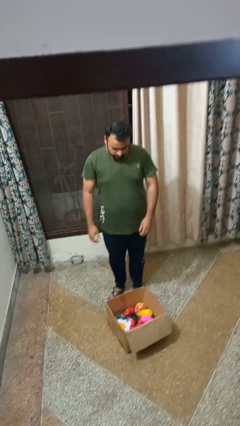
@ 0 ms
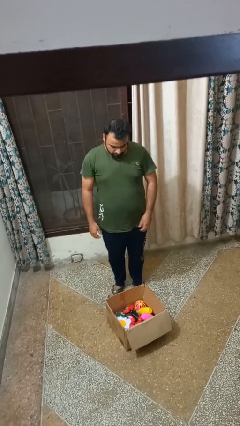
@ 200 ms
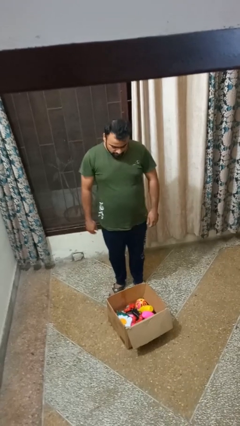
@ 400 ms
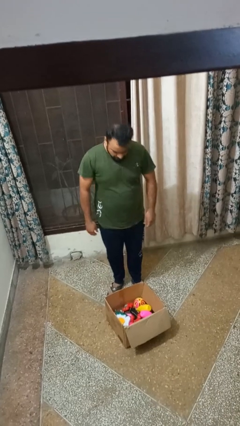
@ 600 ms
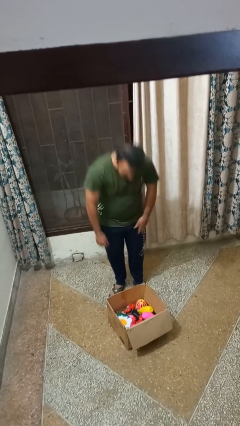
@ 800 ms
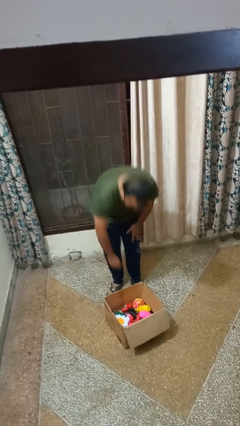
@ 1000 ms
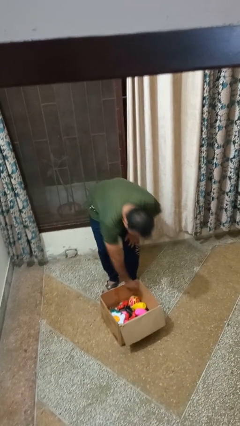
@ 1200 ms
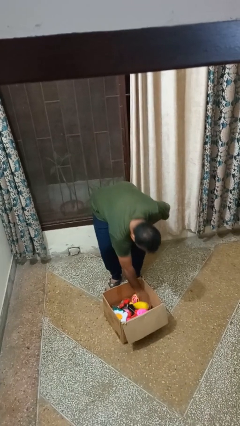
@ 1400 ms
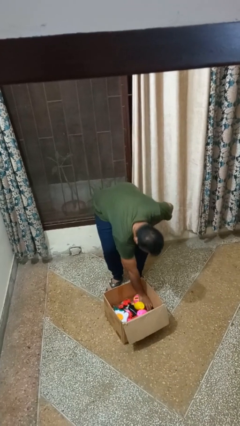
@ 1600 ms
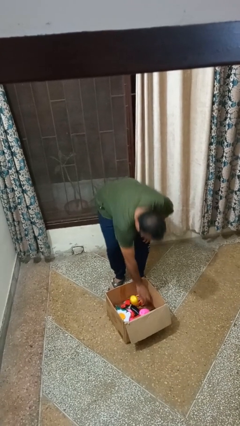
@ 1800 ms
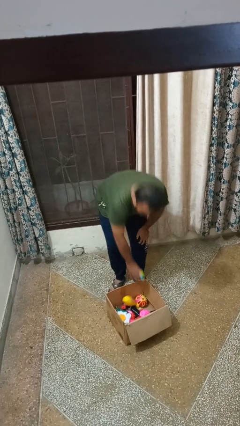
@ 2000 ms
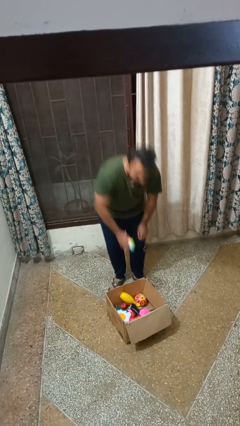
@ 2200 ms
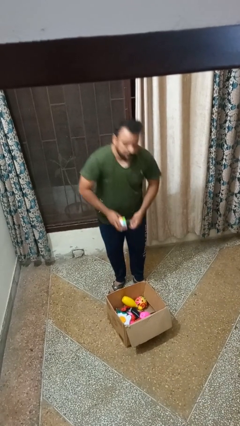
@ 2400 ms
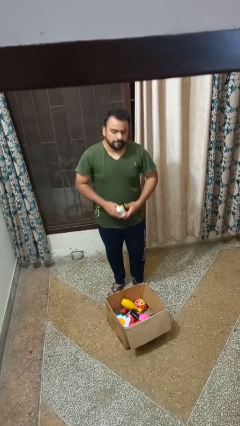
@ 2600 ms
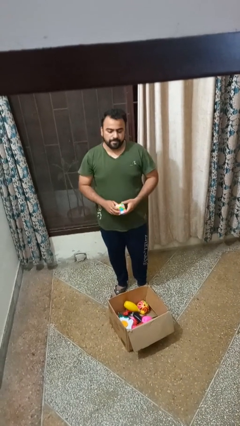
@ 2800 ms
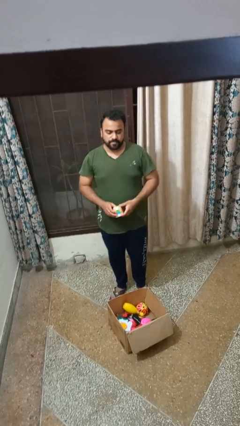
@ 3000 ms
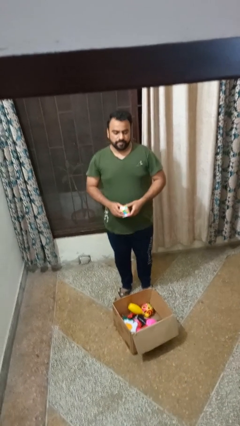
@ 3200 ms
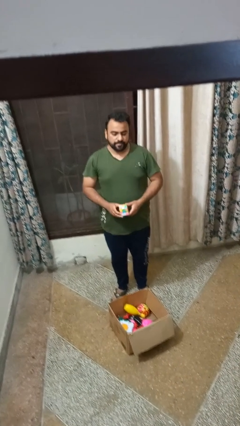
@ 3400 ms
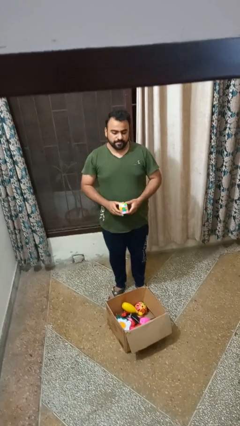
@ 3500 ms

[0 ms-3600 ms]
person takes object from box

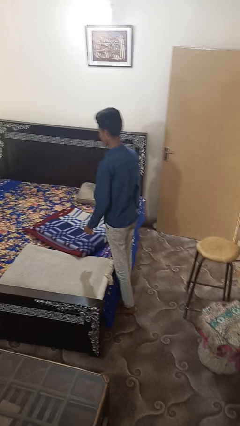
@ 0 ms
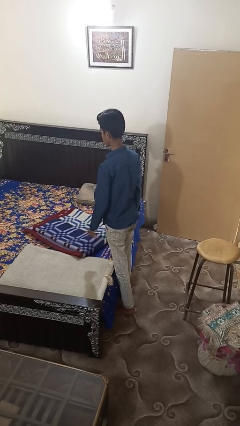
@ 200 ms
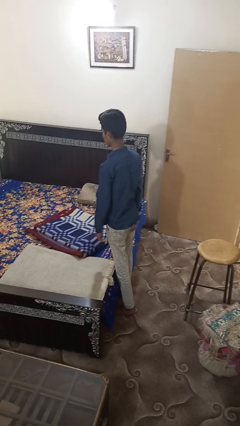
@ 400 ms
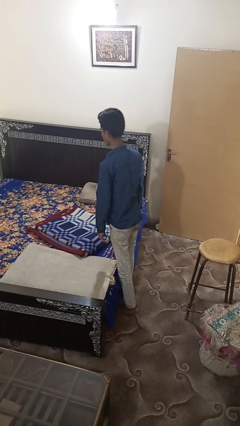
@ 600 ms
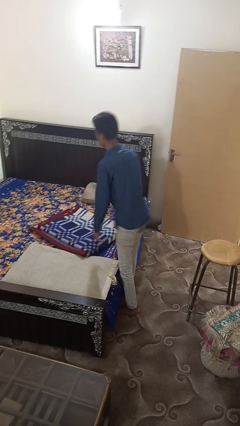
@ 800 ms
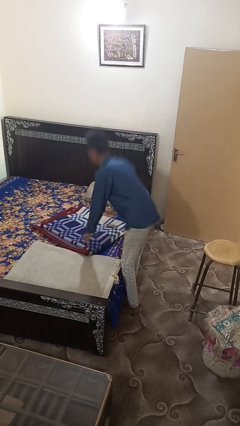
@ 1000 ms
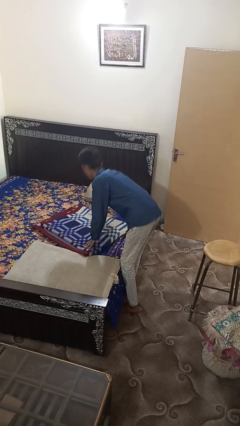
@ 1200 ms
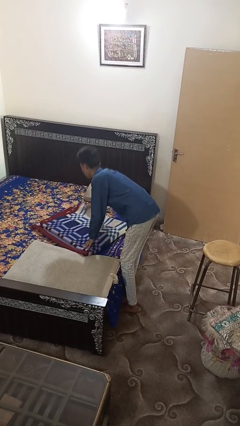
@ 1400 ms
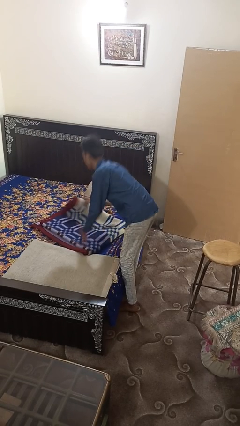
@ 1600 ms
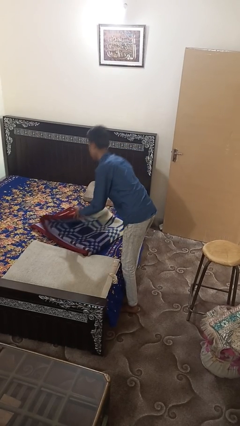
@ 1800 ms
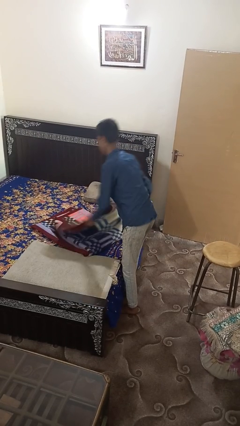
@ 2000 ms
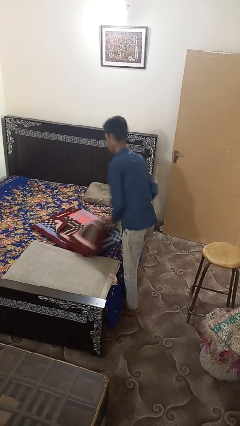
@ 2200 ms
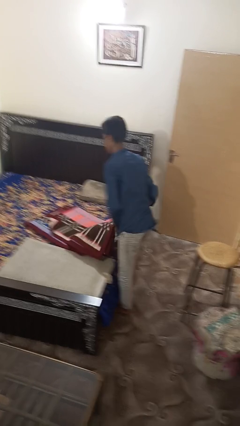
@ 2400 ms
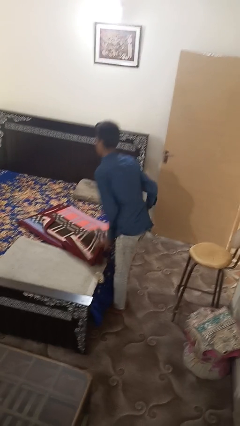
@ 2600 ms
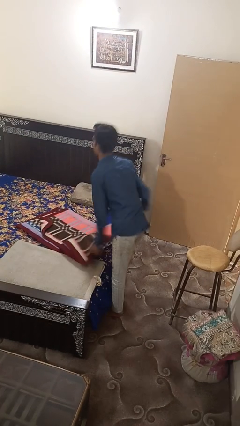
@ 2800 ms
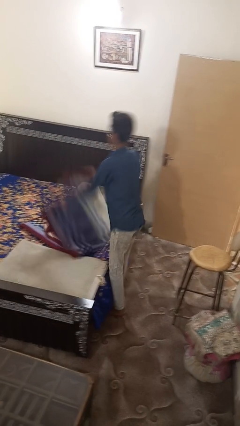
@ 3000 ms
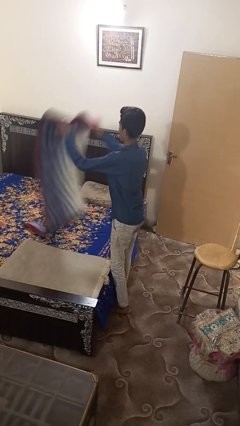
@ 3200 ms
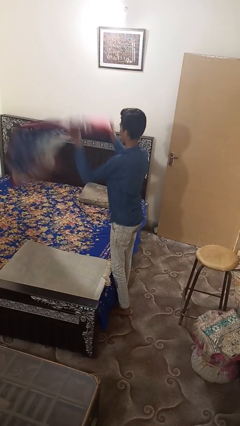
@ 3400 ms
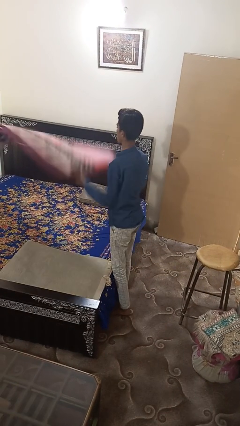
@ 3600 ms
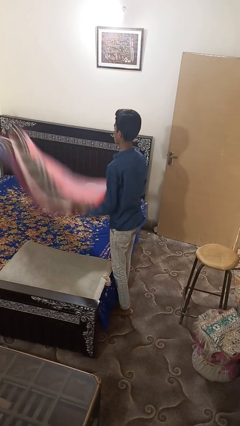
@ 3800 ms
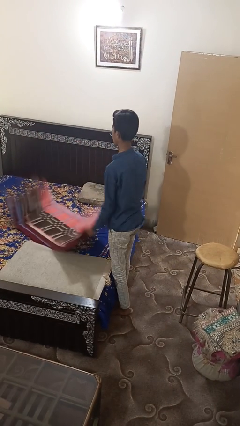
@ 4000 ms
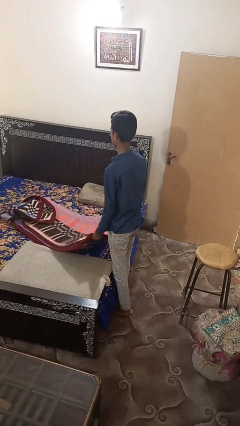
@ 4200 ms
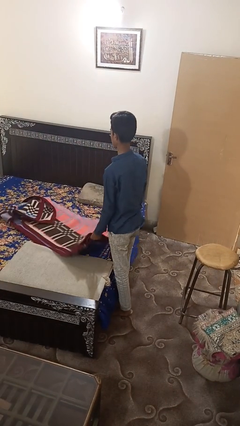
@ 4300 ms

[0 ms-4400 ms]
person unfolds blanket

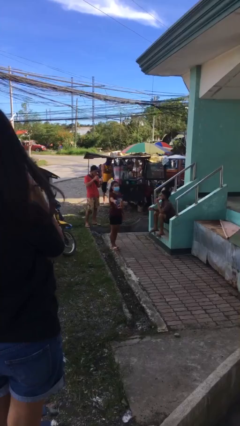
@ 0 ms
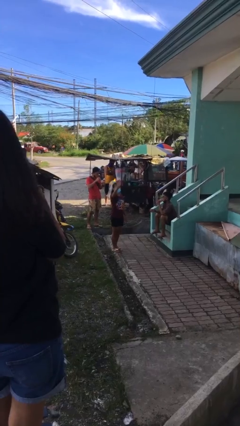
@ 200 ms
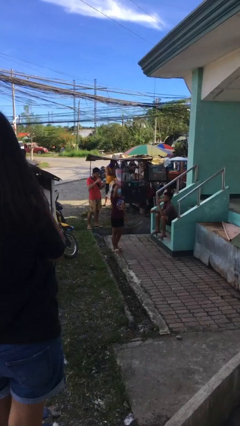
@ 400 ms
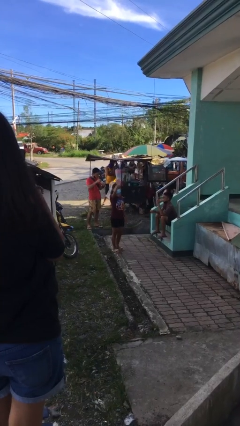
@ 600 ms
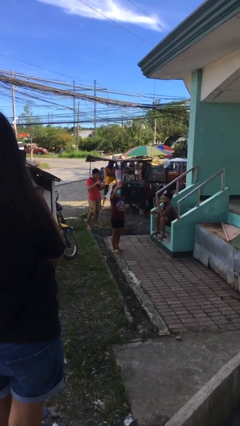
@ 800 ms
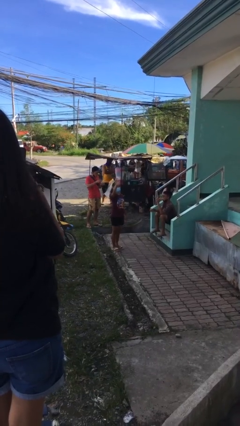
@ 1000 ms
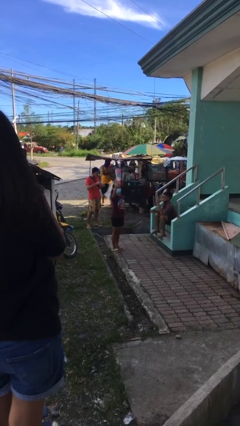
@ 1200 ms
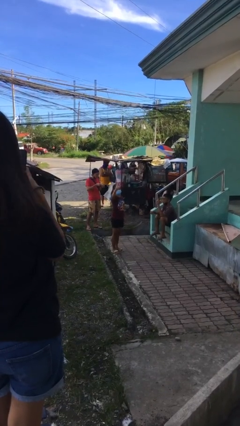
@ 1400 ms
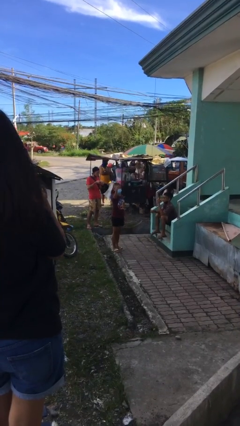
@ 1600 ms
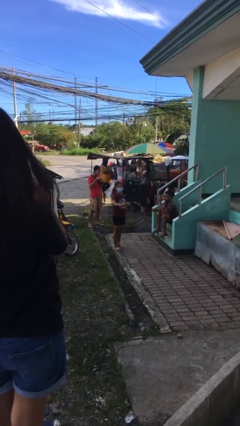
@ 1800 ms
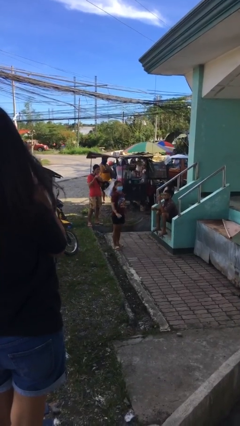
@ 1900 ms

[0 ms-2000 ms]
person waves at person

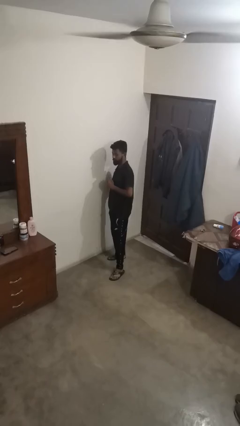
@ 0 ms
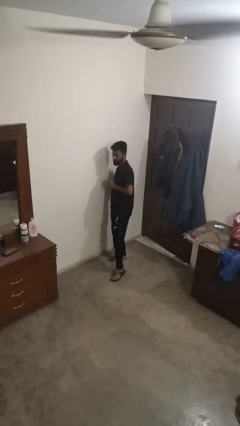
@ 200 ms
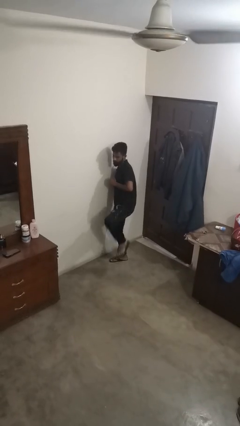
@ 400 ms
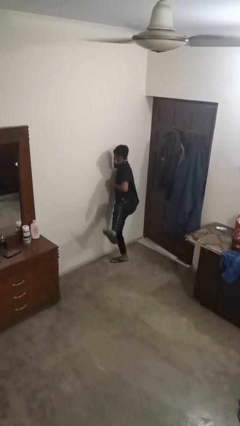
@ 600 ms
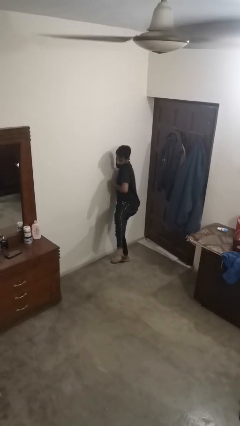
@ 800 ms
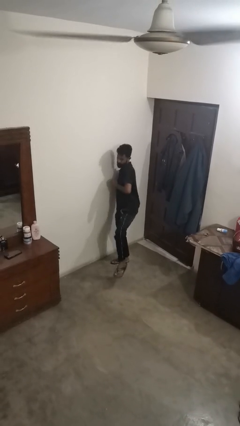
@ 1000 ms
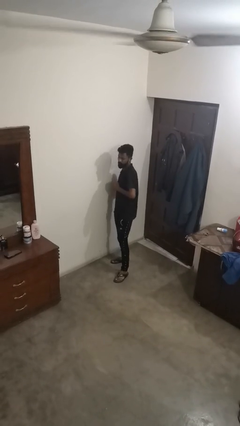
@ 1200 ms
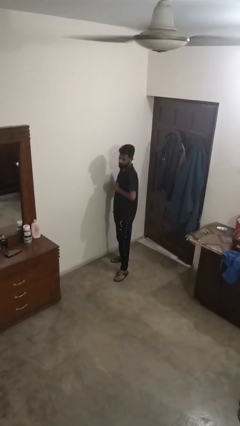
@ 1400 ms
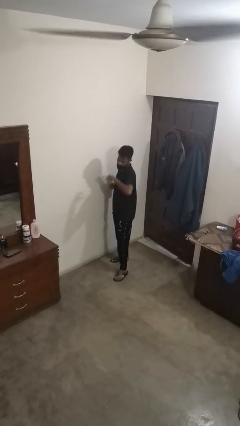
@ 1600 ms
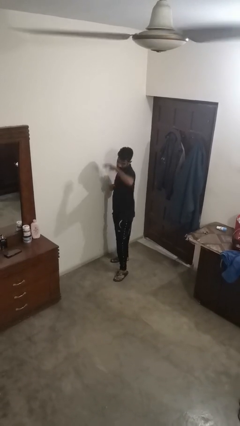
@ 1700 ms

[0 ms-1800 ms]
person karate kicks

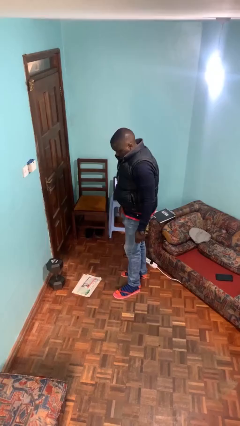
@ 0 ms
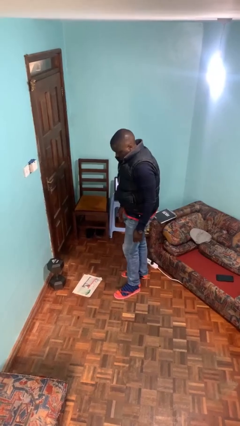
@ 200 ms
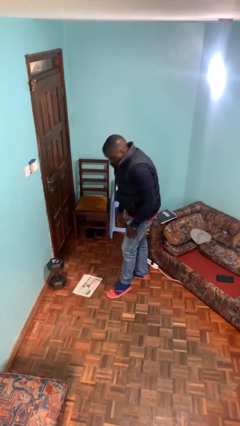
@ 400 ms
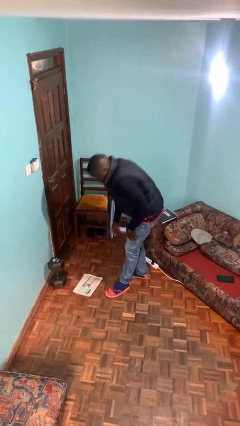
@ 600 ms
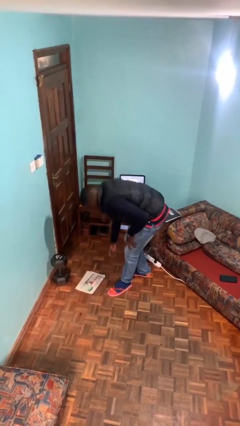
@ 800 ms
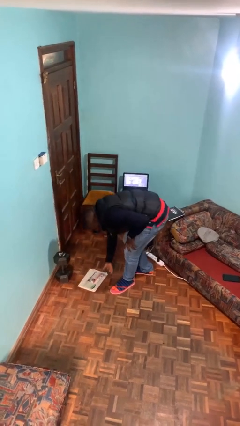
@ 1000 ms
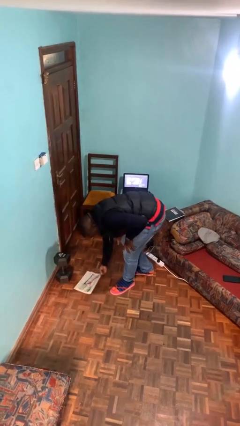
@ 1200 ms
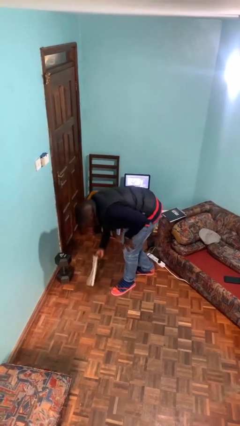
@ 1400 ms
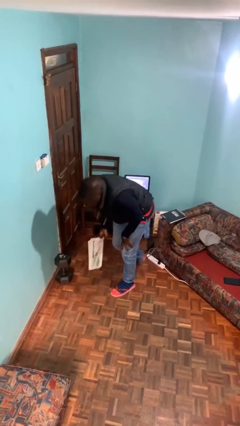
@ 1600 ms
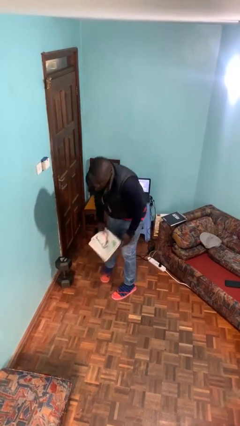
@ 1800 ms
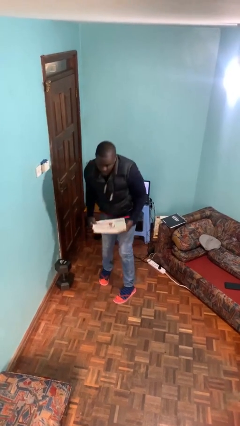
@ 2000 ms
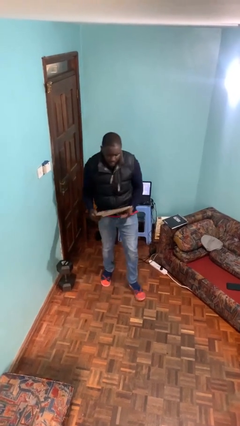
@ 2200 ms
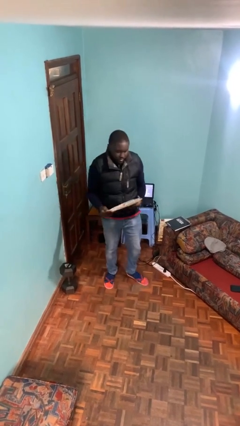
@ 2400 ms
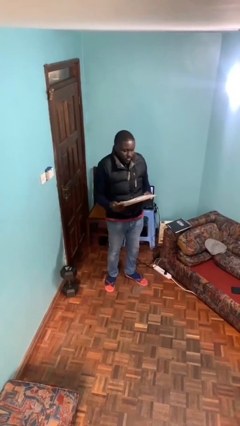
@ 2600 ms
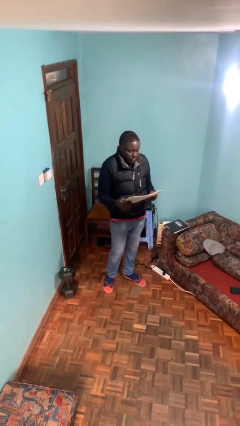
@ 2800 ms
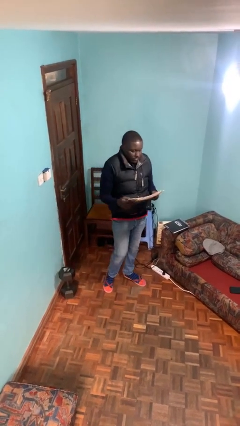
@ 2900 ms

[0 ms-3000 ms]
person picks up object from floor

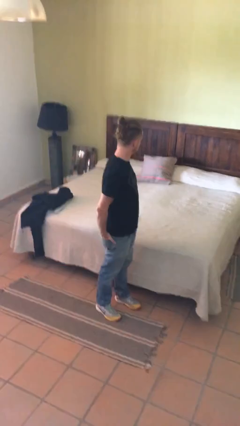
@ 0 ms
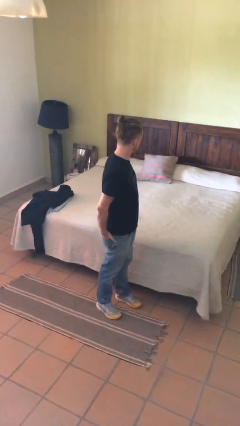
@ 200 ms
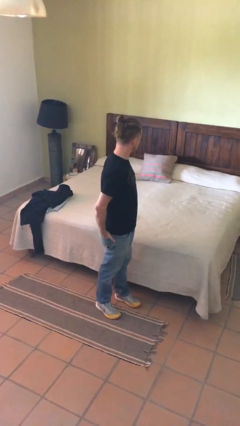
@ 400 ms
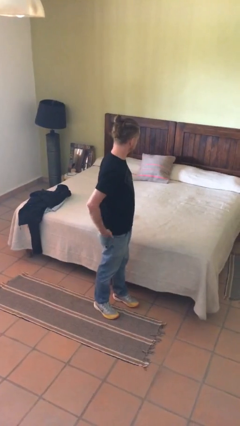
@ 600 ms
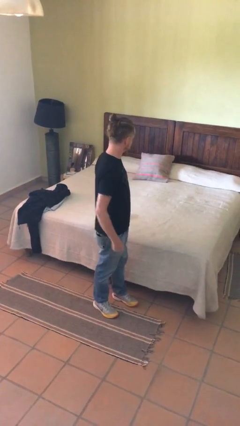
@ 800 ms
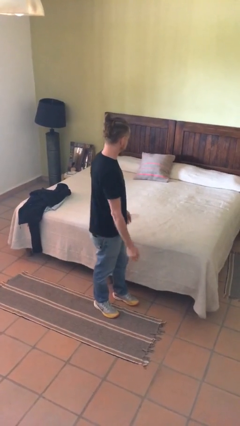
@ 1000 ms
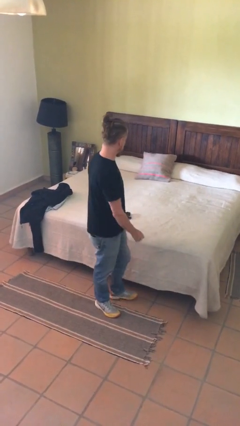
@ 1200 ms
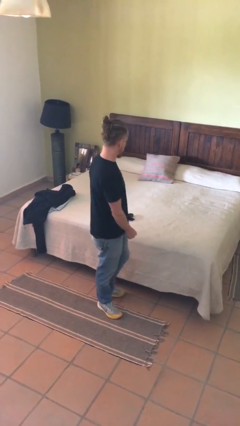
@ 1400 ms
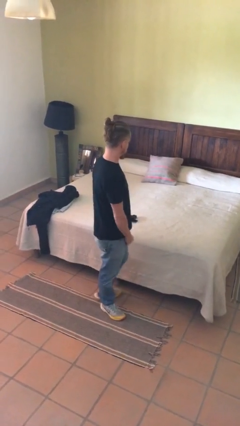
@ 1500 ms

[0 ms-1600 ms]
person puts hands in back pockets

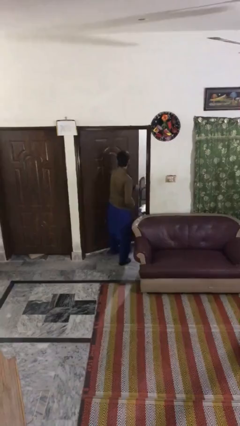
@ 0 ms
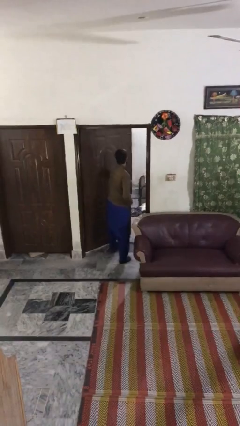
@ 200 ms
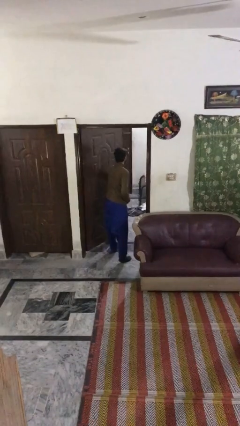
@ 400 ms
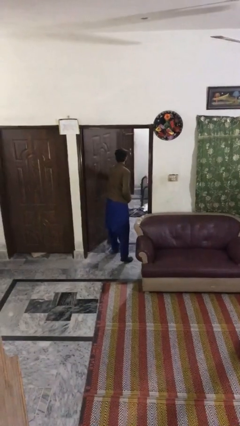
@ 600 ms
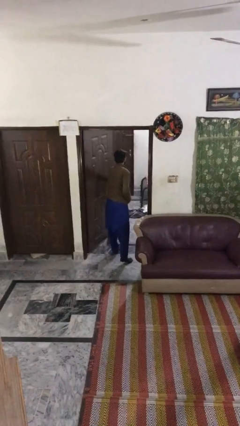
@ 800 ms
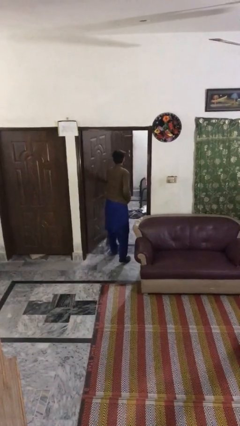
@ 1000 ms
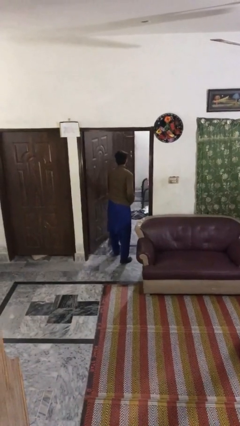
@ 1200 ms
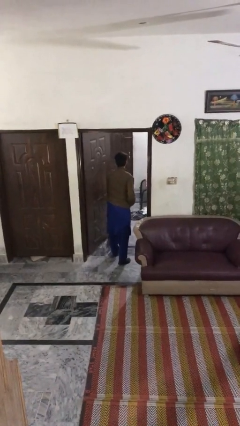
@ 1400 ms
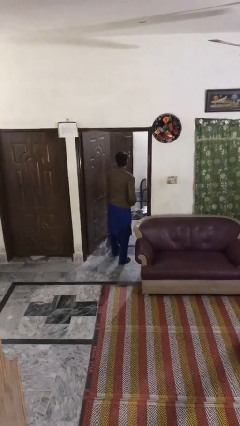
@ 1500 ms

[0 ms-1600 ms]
person opens facility door
